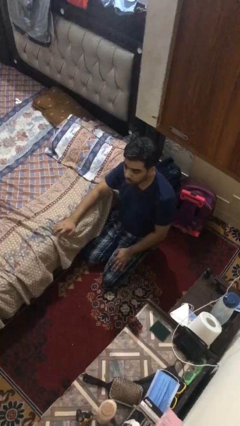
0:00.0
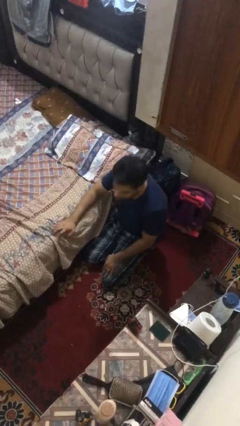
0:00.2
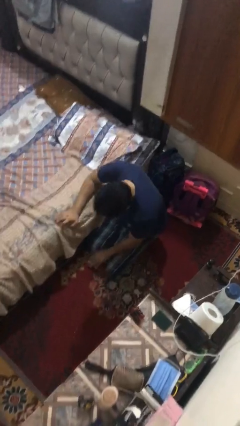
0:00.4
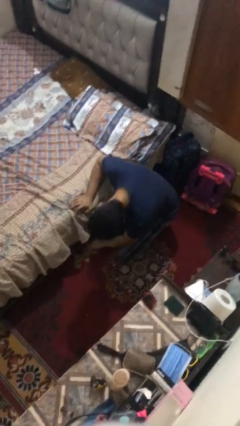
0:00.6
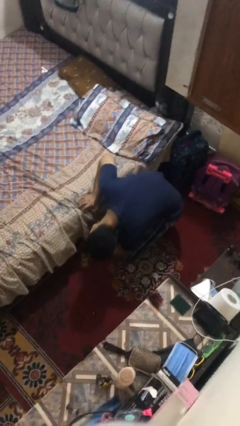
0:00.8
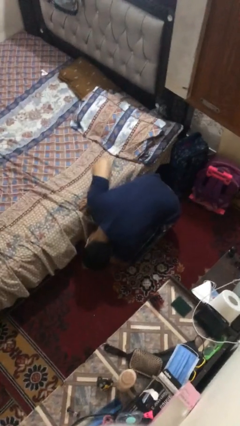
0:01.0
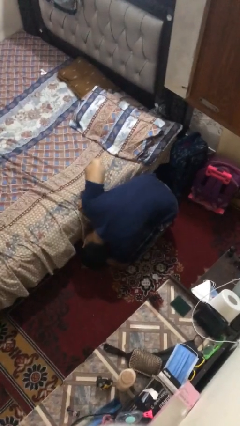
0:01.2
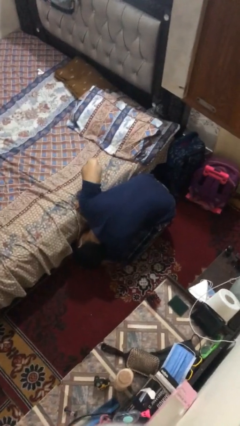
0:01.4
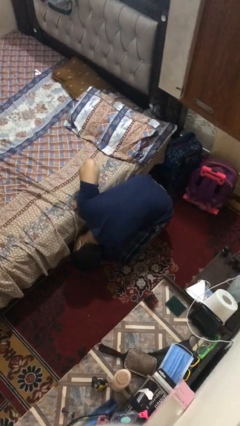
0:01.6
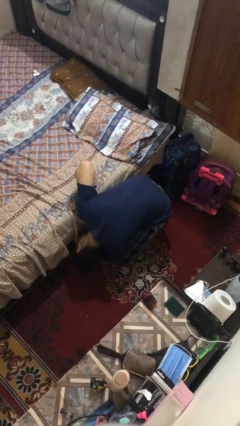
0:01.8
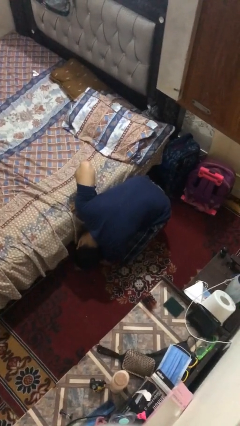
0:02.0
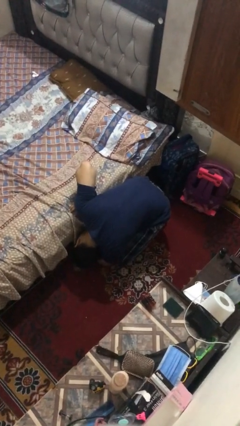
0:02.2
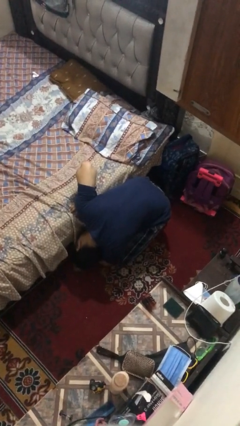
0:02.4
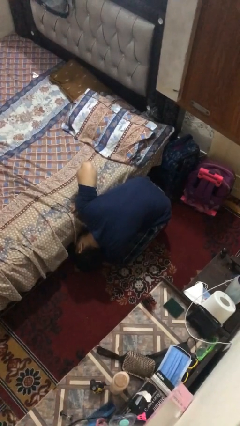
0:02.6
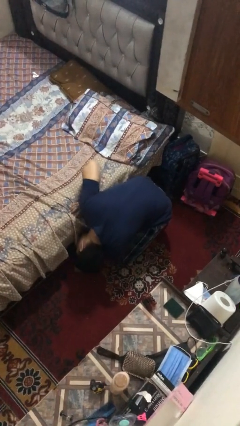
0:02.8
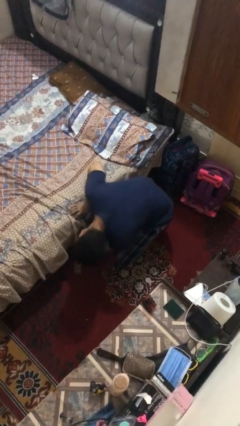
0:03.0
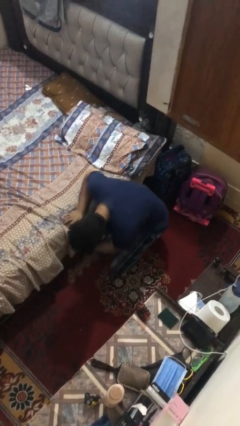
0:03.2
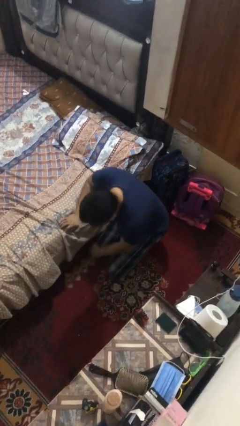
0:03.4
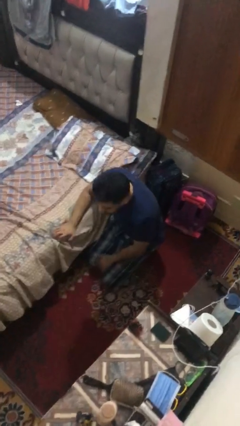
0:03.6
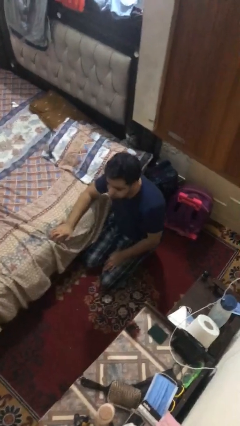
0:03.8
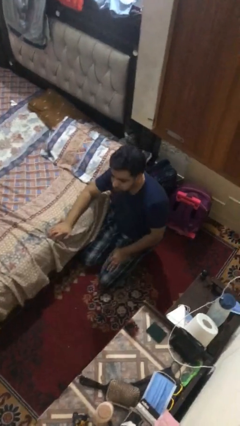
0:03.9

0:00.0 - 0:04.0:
person searches under bed

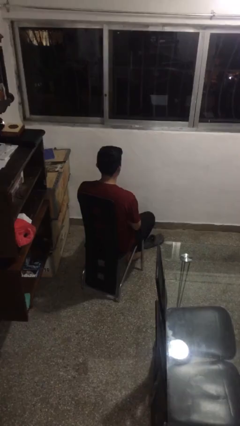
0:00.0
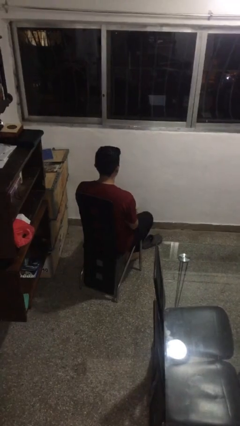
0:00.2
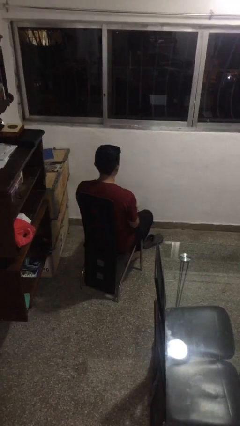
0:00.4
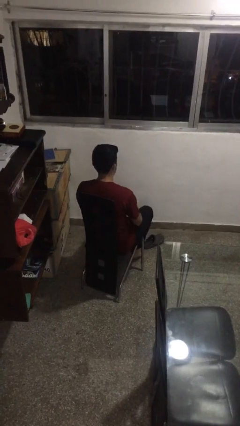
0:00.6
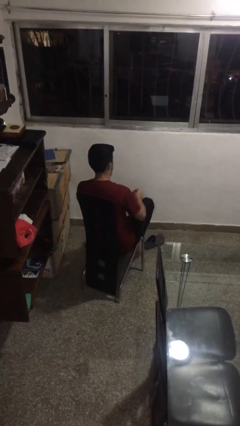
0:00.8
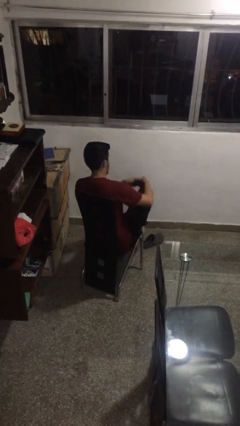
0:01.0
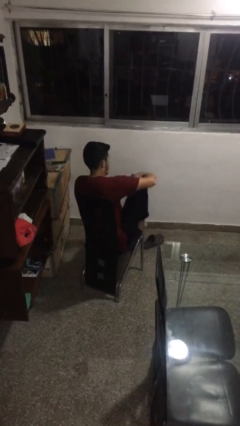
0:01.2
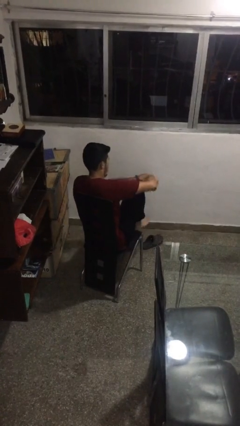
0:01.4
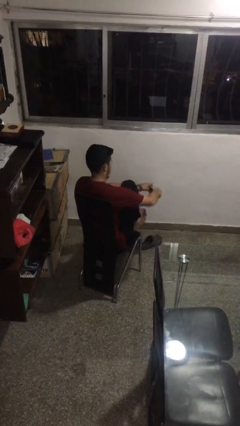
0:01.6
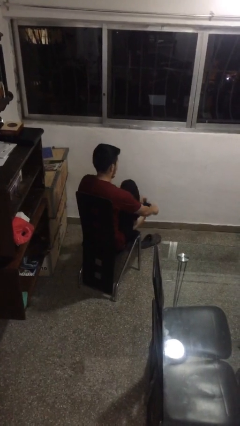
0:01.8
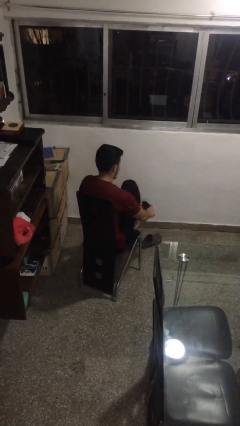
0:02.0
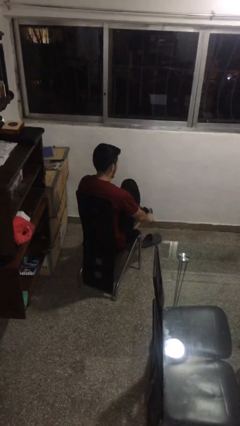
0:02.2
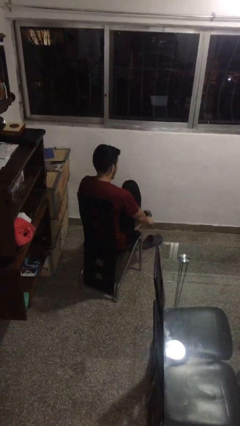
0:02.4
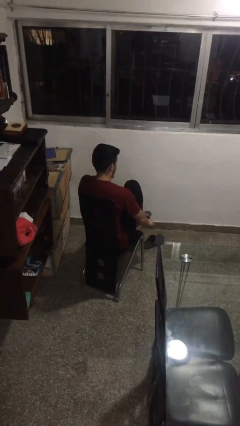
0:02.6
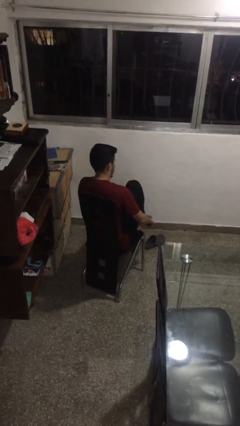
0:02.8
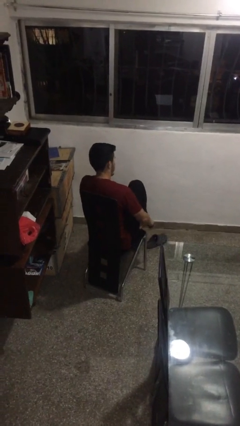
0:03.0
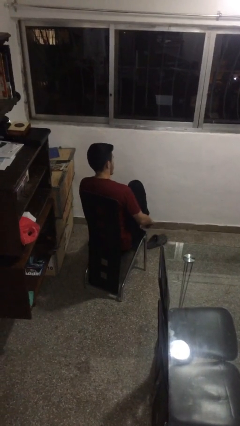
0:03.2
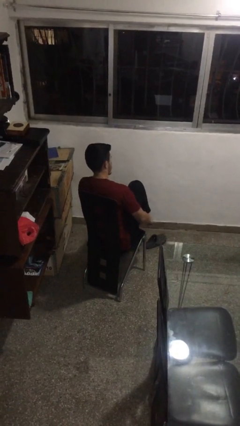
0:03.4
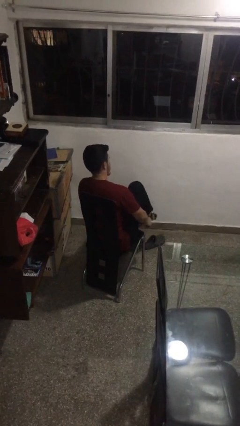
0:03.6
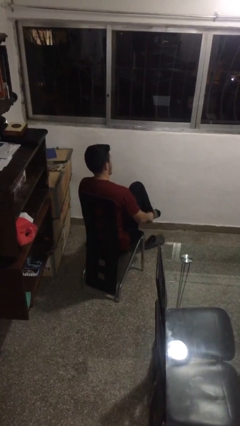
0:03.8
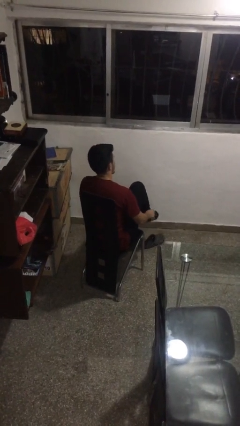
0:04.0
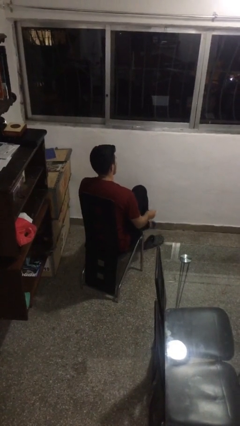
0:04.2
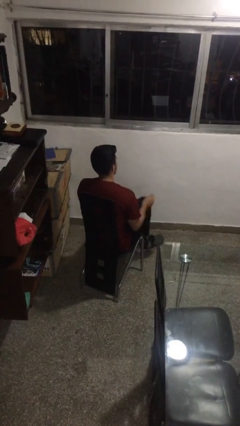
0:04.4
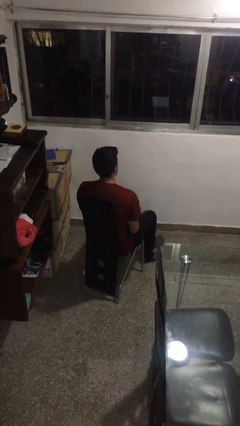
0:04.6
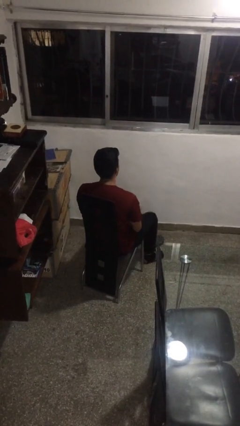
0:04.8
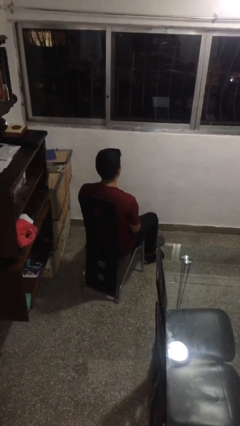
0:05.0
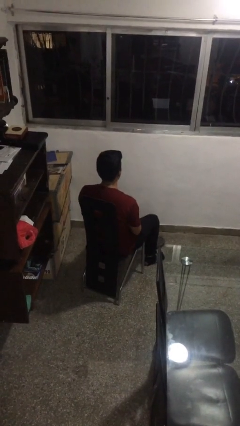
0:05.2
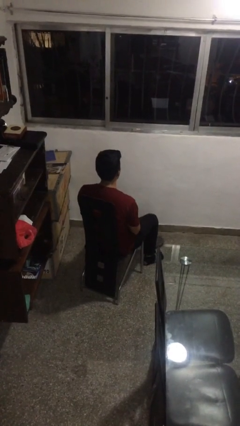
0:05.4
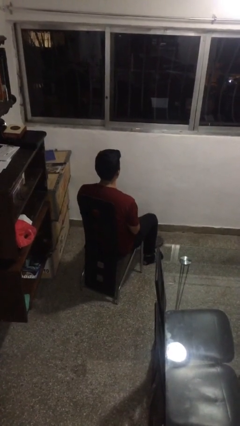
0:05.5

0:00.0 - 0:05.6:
person puts on socks

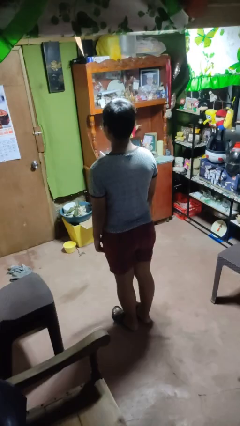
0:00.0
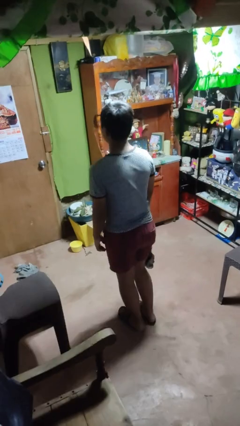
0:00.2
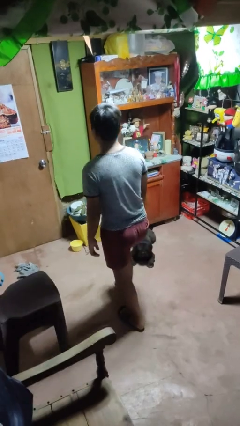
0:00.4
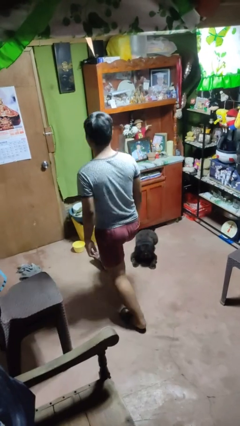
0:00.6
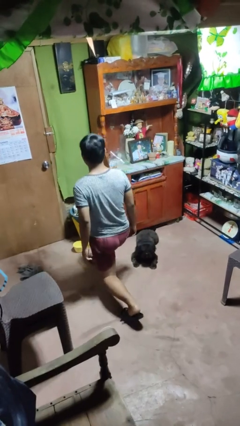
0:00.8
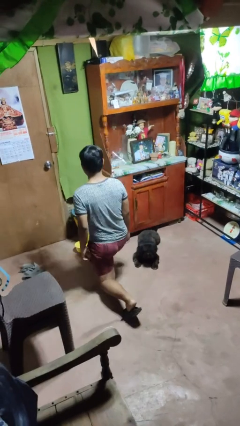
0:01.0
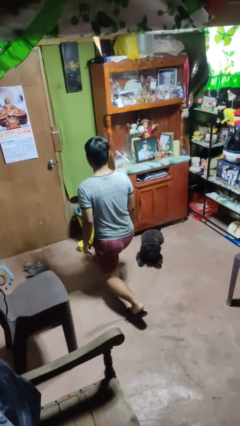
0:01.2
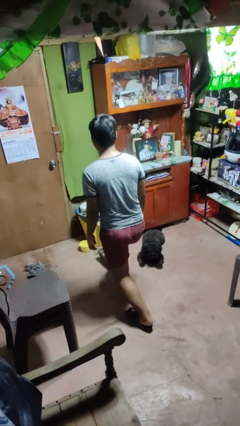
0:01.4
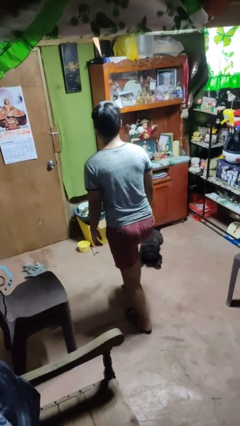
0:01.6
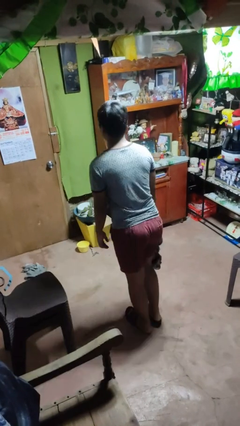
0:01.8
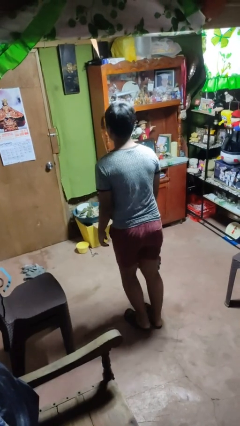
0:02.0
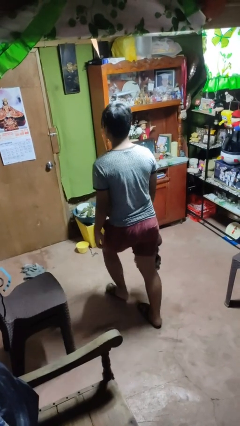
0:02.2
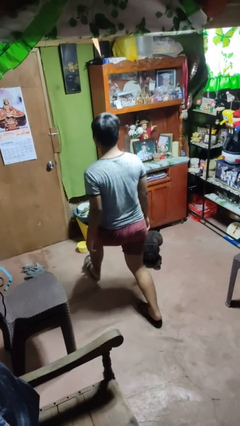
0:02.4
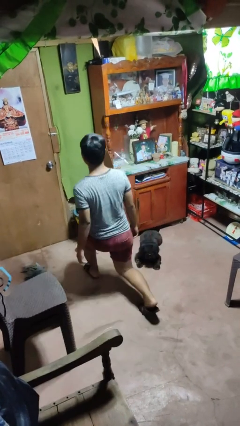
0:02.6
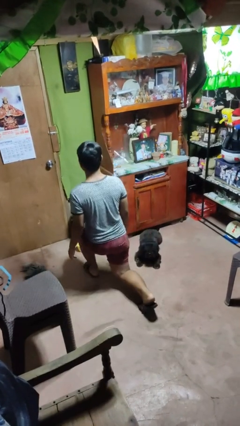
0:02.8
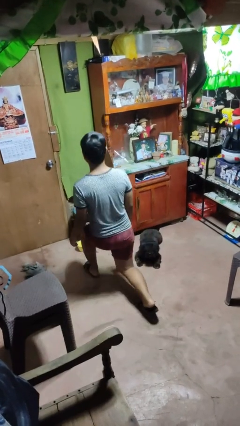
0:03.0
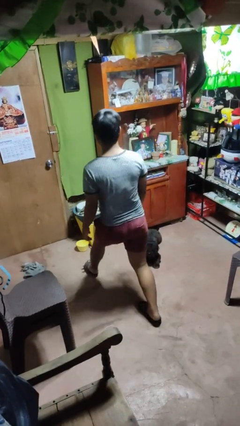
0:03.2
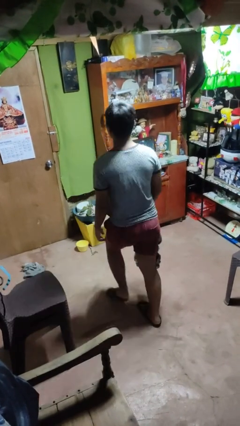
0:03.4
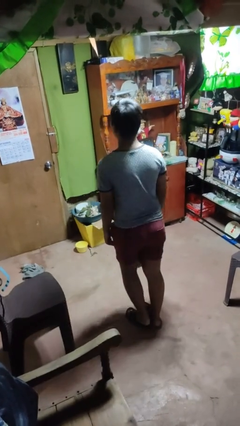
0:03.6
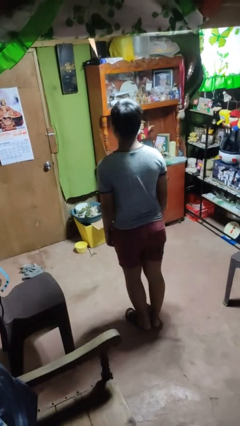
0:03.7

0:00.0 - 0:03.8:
person exercises with lunges

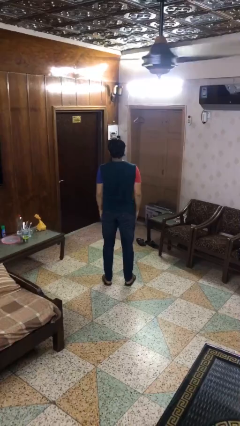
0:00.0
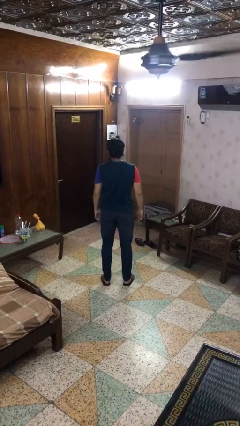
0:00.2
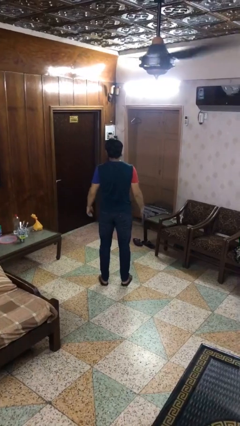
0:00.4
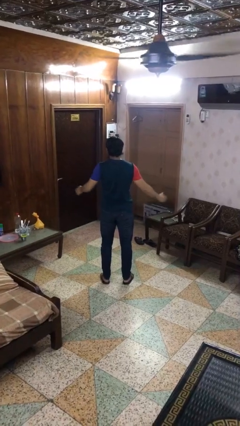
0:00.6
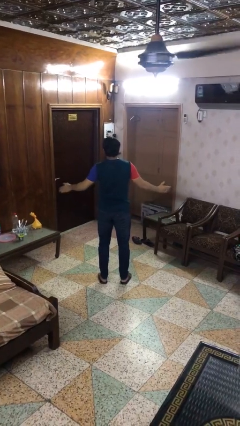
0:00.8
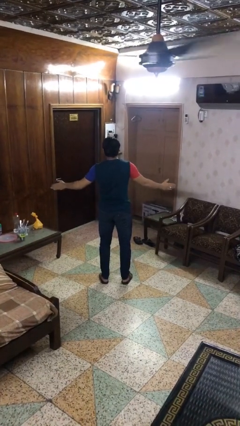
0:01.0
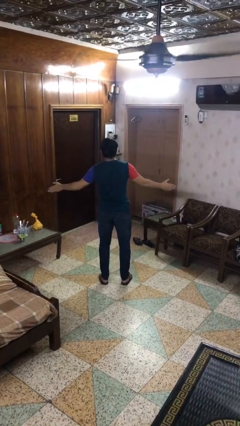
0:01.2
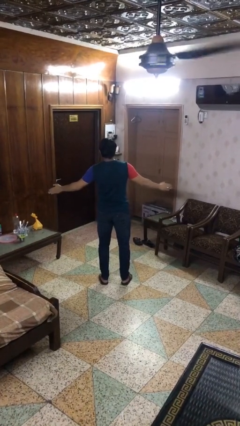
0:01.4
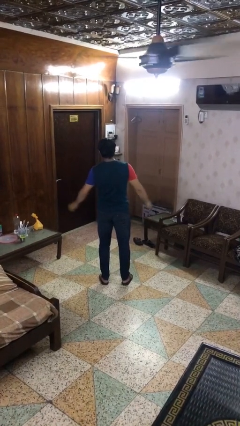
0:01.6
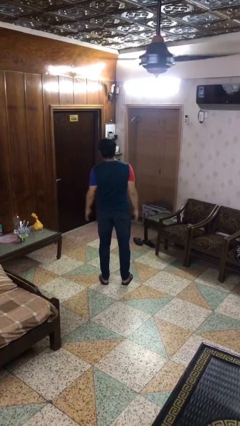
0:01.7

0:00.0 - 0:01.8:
person dances in place

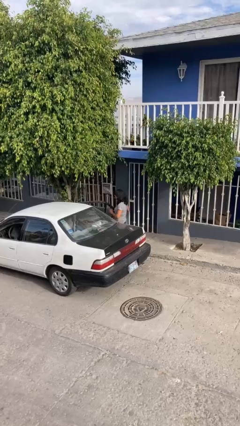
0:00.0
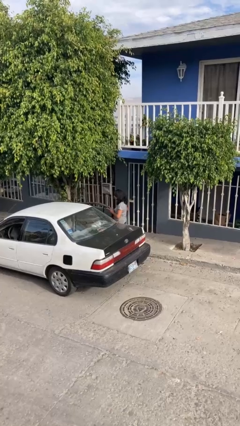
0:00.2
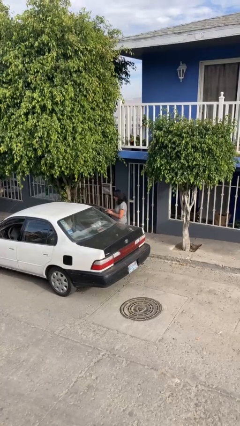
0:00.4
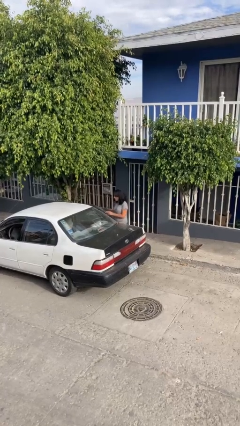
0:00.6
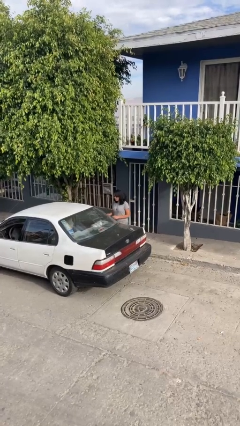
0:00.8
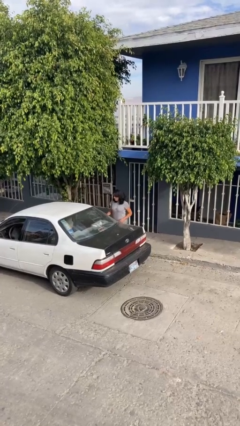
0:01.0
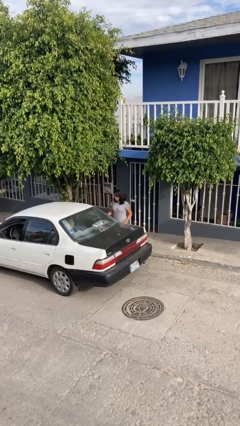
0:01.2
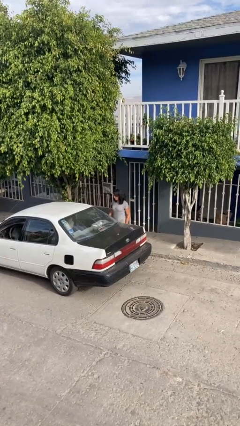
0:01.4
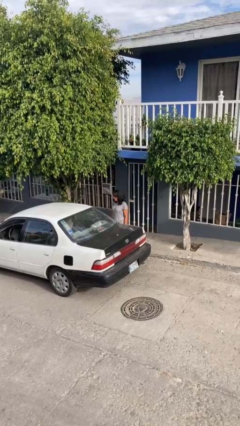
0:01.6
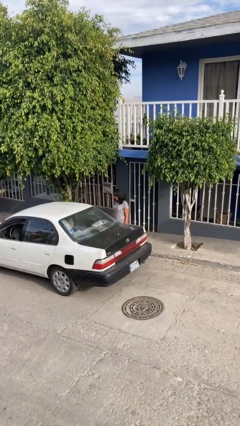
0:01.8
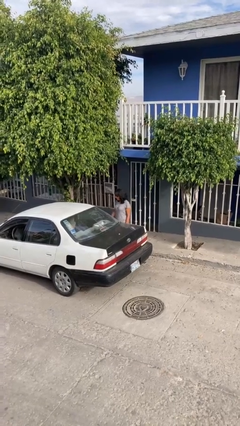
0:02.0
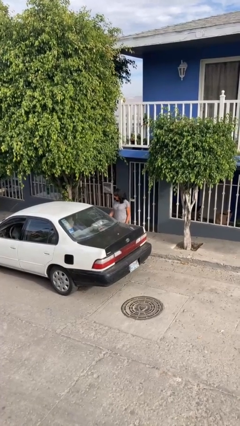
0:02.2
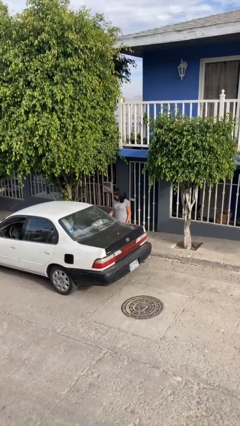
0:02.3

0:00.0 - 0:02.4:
person closes car door
